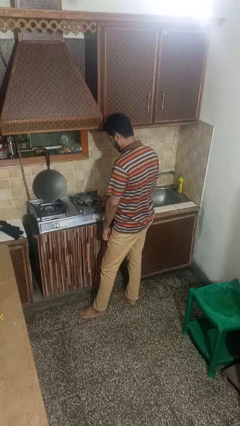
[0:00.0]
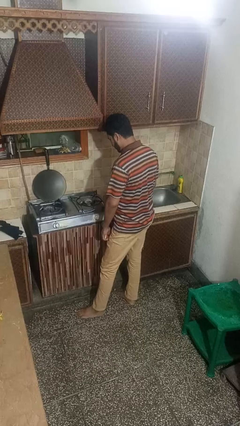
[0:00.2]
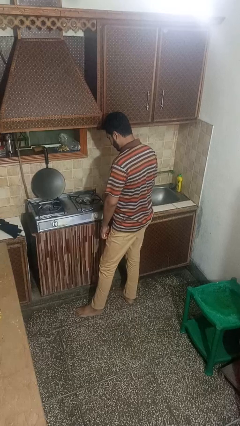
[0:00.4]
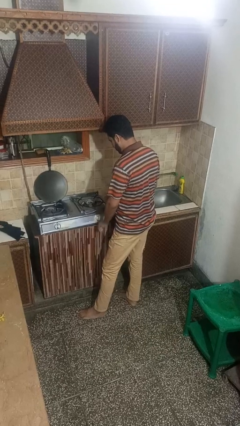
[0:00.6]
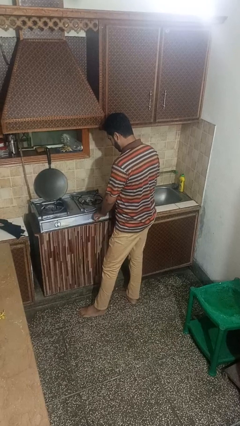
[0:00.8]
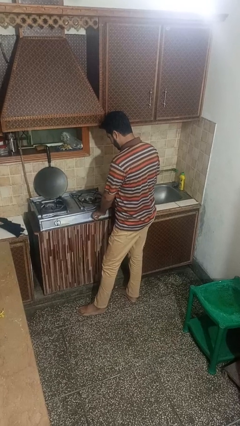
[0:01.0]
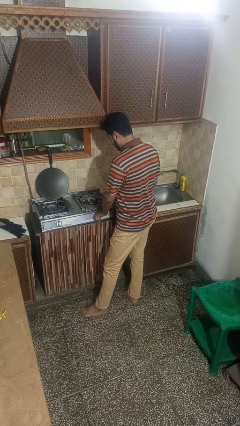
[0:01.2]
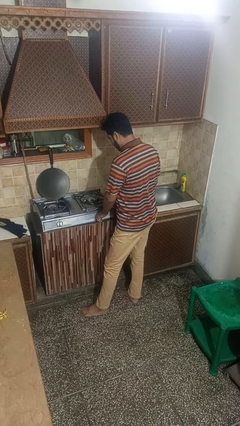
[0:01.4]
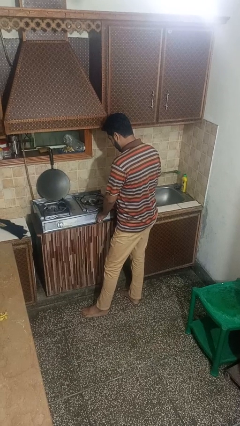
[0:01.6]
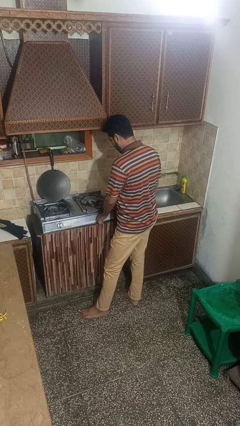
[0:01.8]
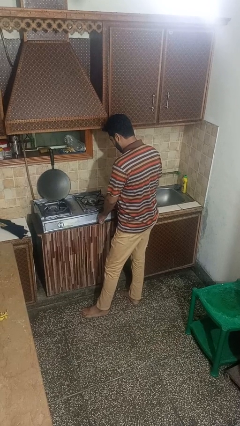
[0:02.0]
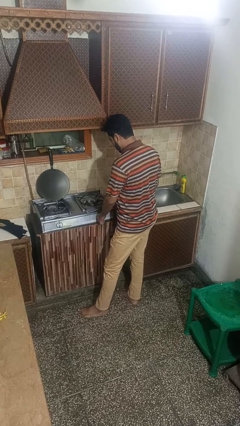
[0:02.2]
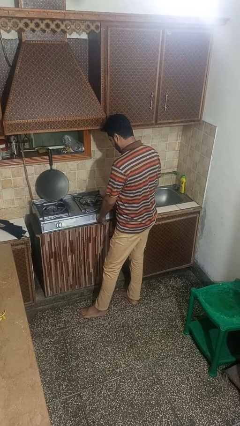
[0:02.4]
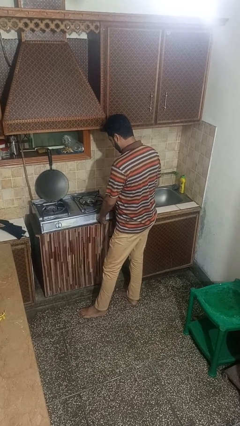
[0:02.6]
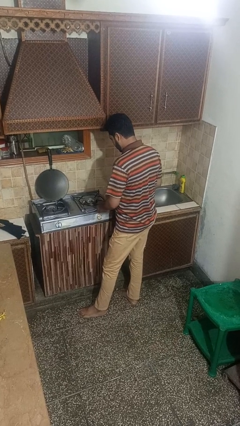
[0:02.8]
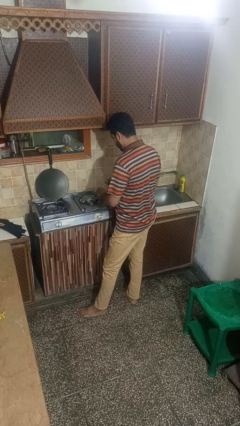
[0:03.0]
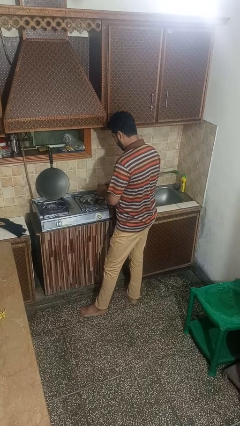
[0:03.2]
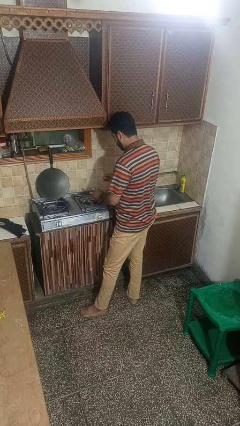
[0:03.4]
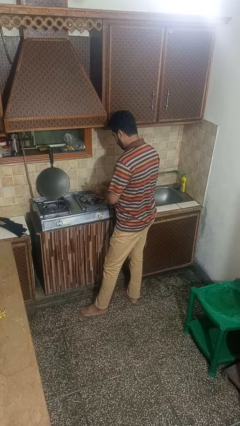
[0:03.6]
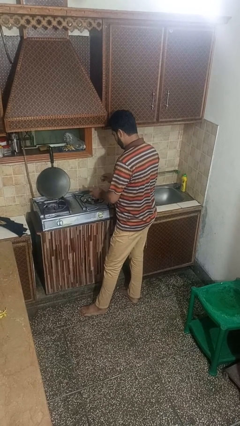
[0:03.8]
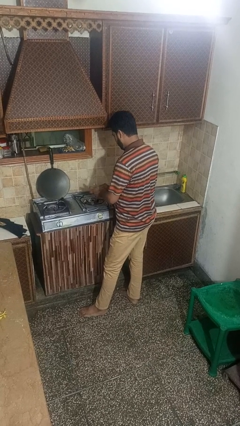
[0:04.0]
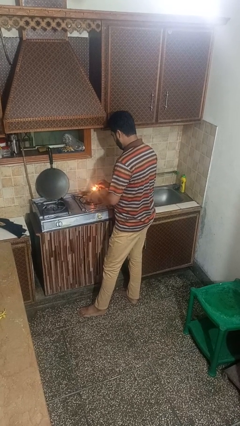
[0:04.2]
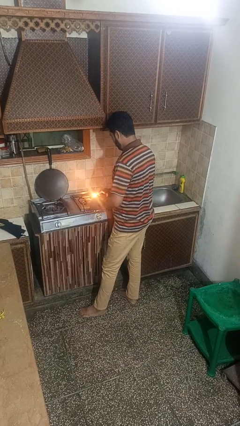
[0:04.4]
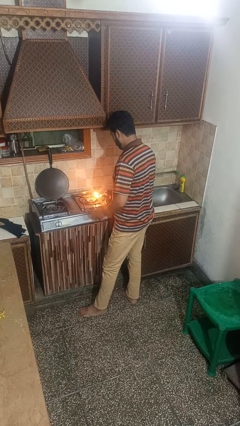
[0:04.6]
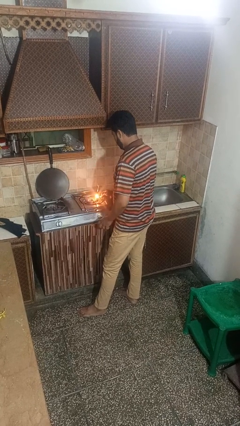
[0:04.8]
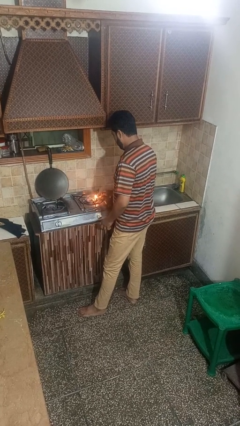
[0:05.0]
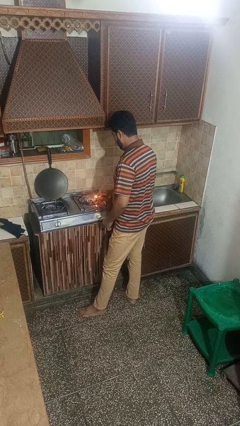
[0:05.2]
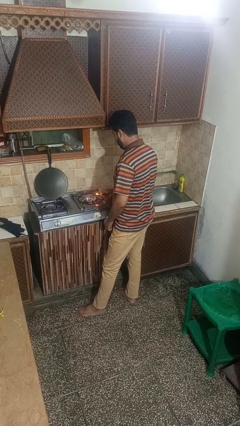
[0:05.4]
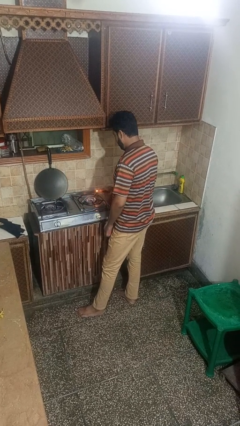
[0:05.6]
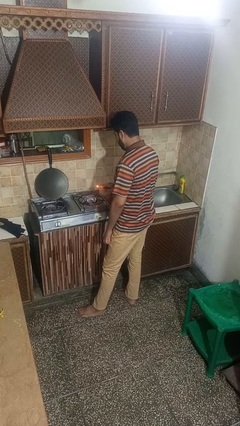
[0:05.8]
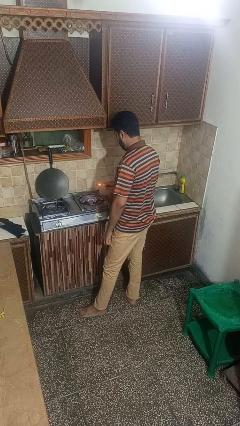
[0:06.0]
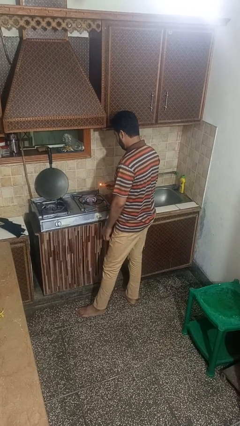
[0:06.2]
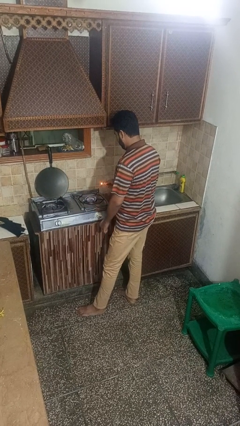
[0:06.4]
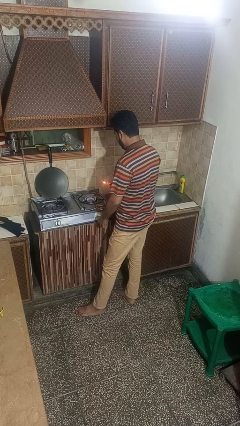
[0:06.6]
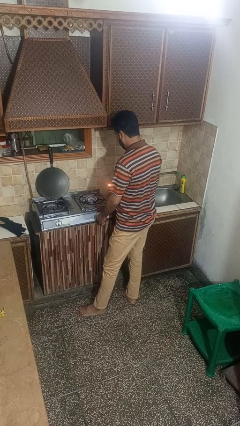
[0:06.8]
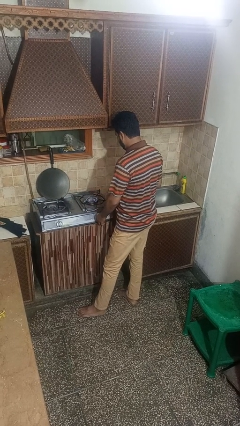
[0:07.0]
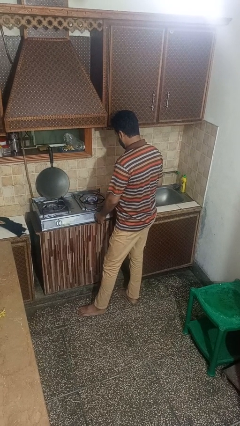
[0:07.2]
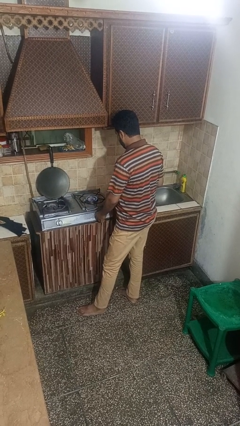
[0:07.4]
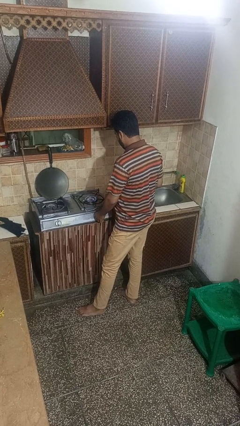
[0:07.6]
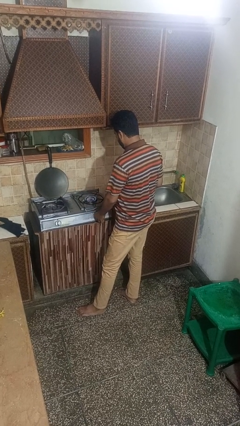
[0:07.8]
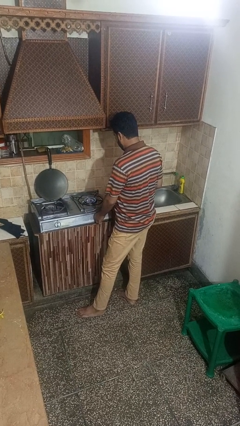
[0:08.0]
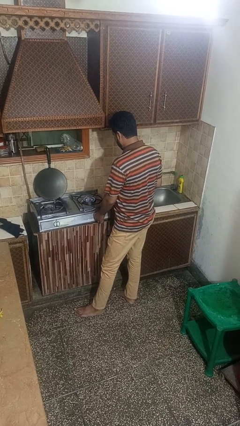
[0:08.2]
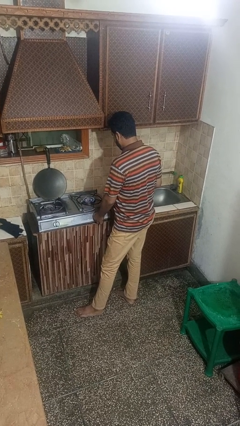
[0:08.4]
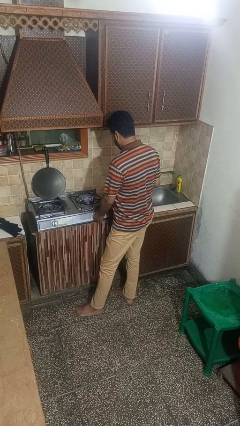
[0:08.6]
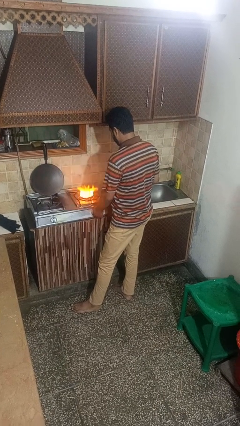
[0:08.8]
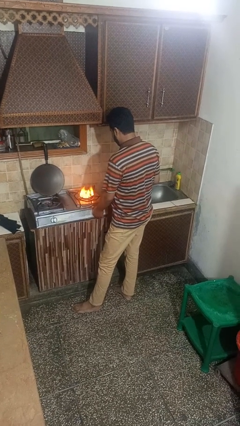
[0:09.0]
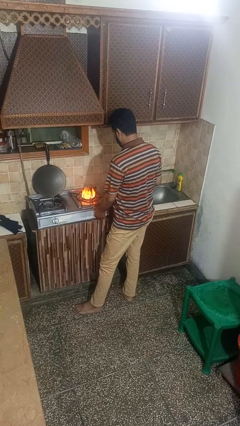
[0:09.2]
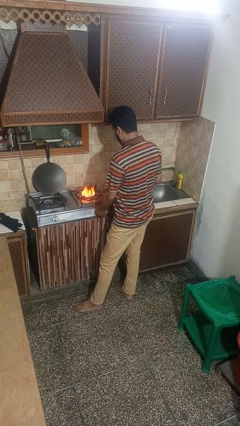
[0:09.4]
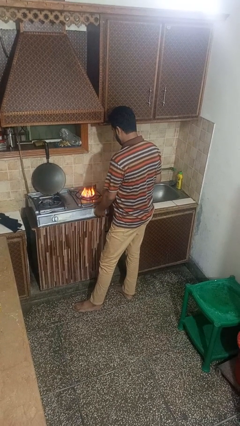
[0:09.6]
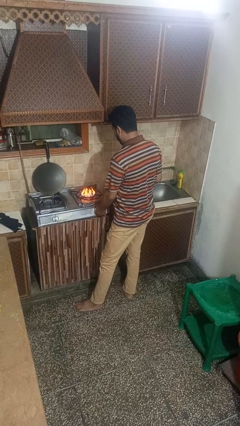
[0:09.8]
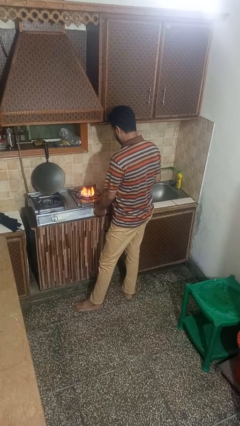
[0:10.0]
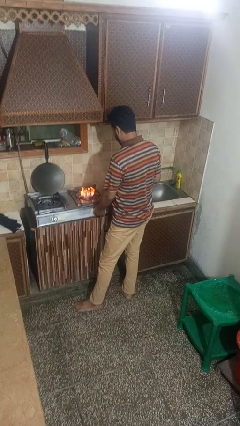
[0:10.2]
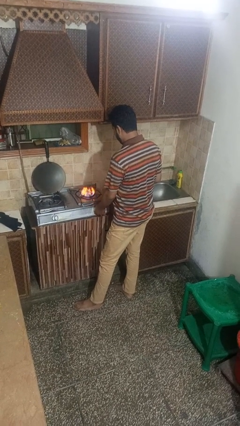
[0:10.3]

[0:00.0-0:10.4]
person turns on stovetop

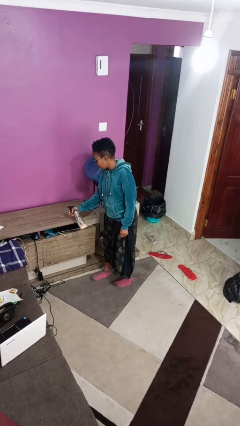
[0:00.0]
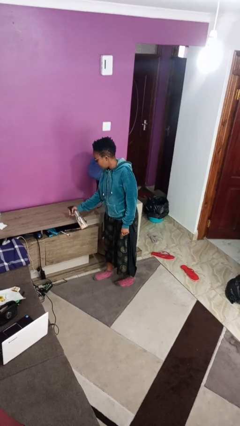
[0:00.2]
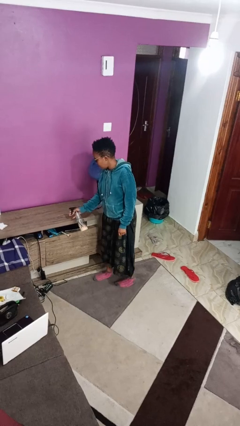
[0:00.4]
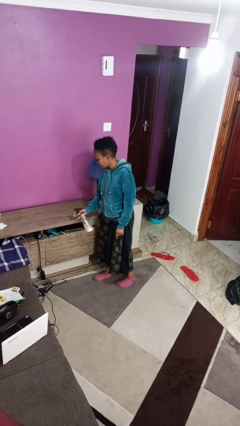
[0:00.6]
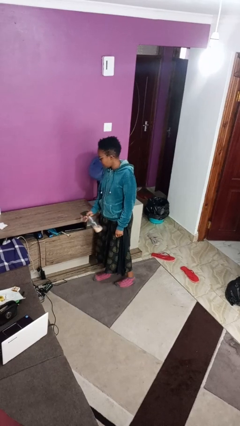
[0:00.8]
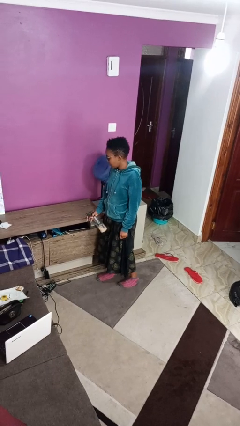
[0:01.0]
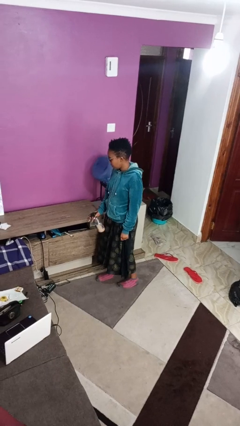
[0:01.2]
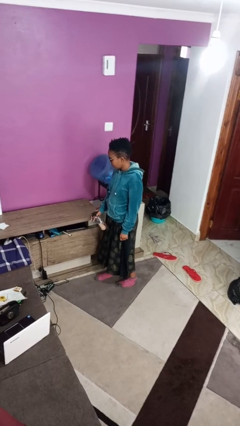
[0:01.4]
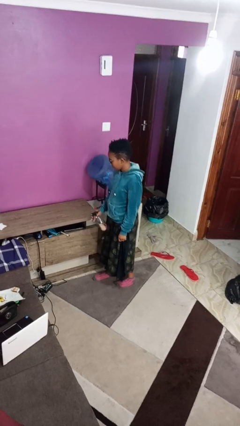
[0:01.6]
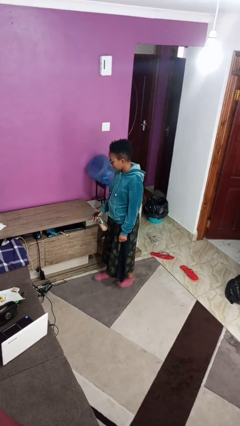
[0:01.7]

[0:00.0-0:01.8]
person sprays from bottle

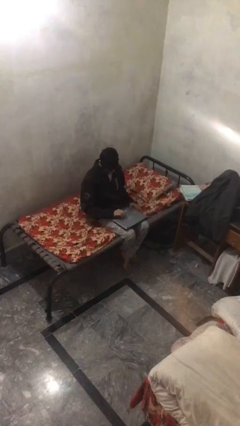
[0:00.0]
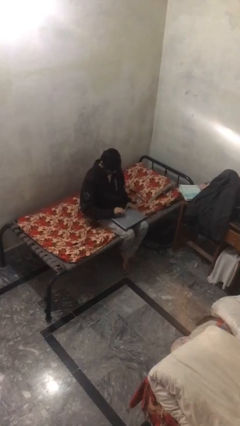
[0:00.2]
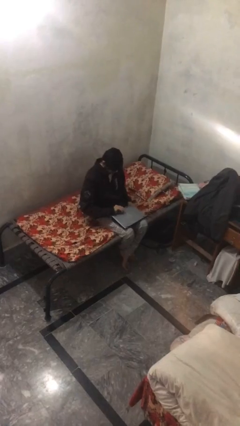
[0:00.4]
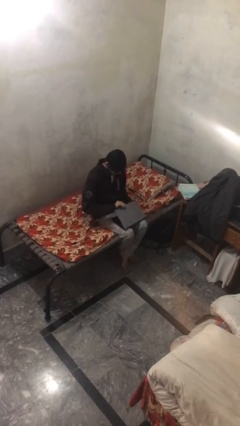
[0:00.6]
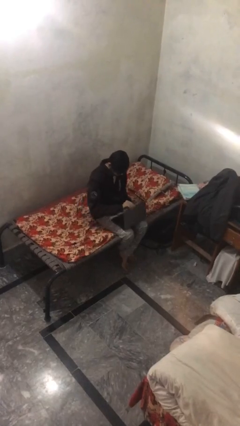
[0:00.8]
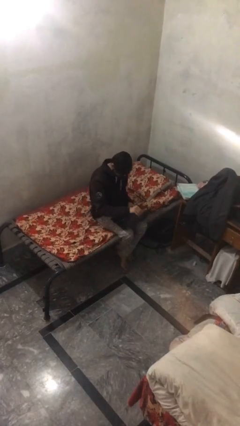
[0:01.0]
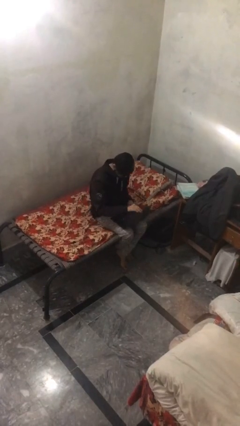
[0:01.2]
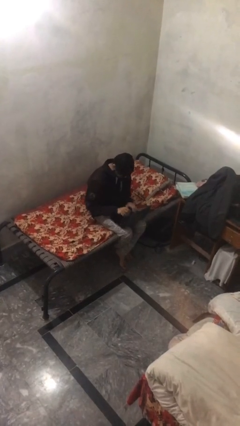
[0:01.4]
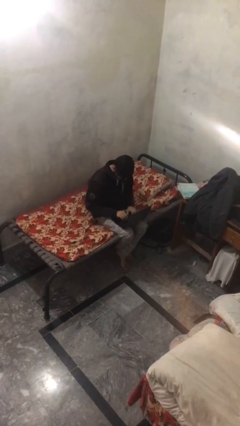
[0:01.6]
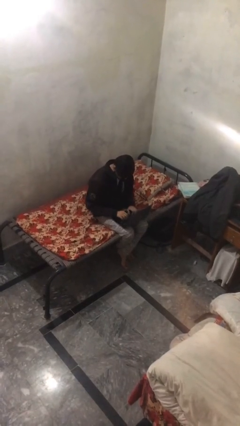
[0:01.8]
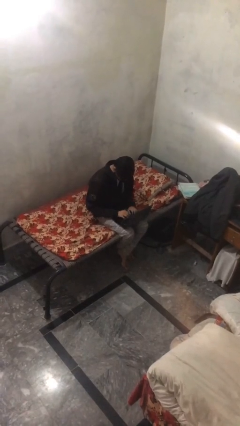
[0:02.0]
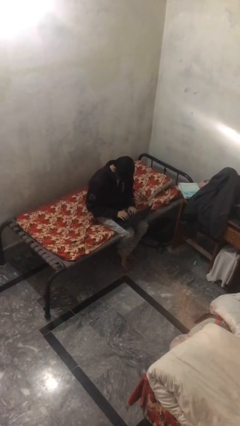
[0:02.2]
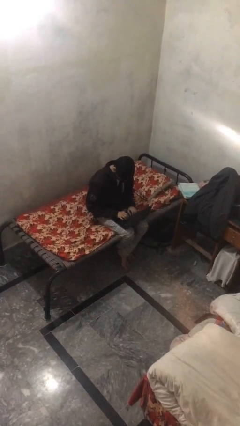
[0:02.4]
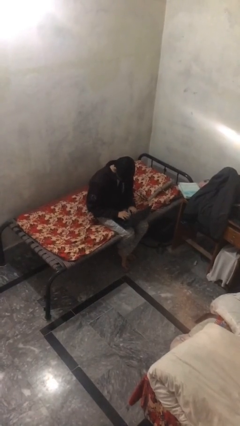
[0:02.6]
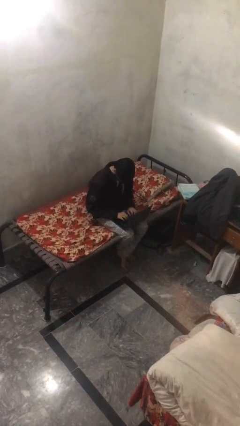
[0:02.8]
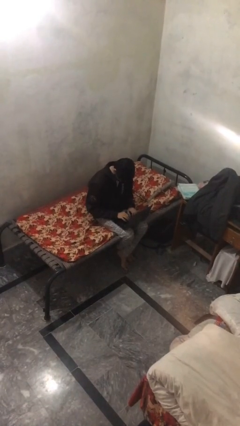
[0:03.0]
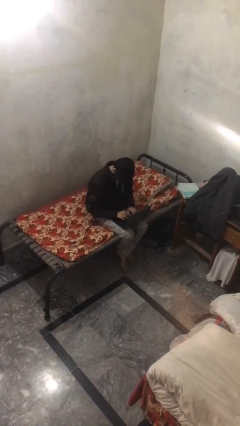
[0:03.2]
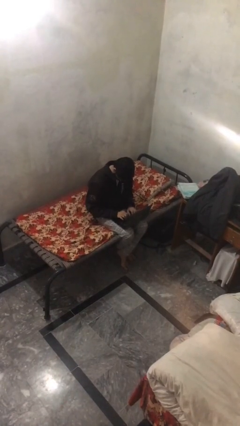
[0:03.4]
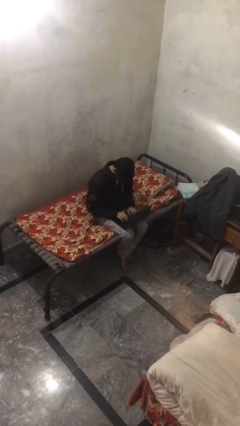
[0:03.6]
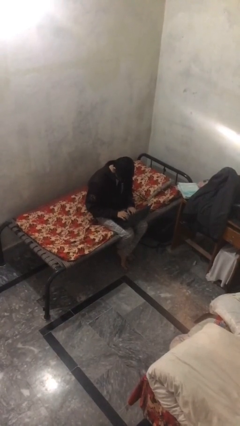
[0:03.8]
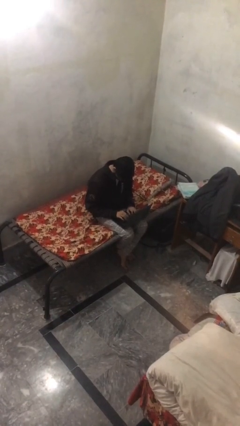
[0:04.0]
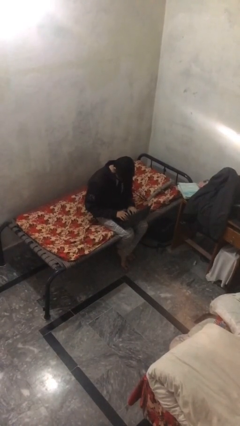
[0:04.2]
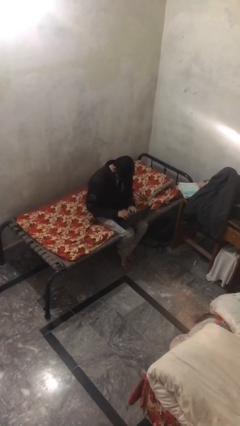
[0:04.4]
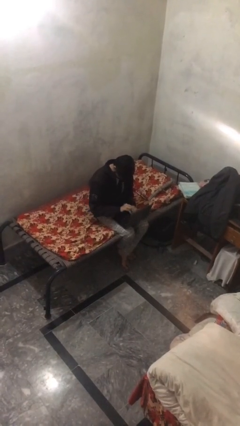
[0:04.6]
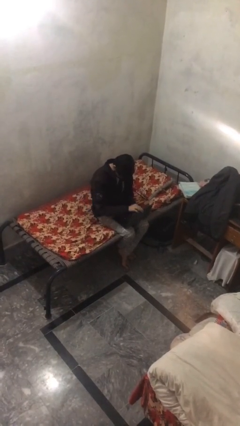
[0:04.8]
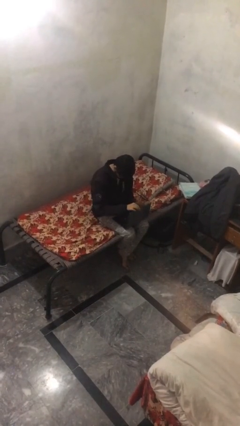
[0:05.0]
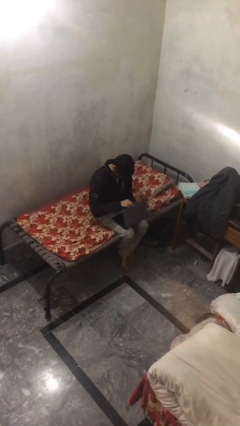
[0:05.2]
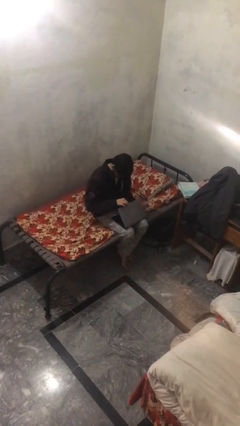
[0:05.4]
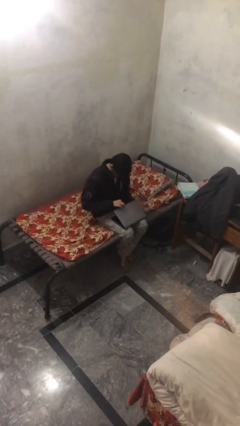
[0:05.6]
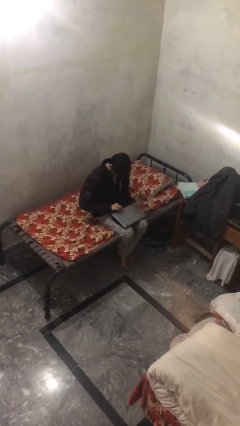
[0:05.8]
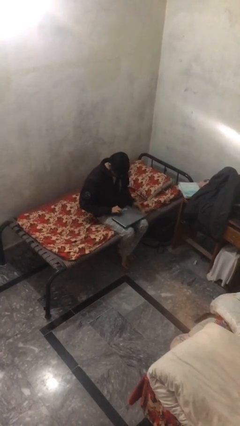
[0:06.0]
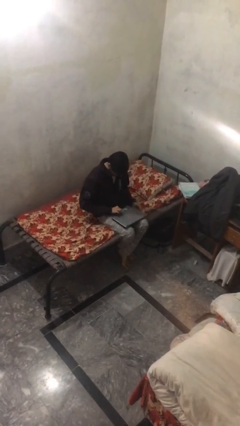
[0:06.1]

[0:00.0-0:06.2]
person interacts with laptop
